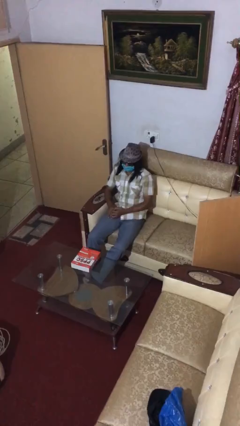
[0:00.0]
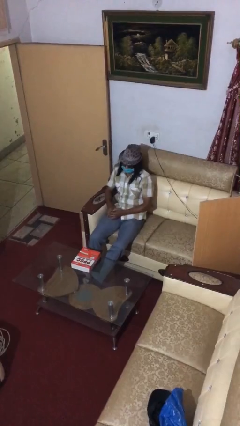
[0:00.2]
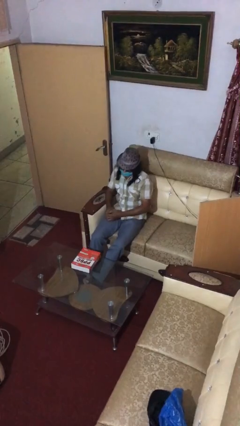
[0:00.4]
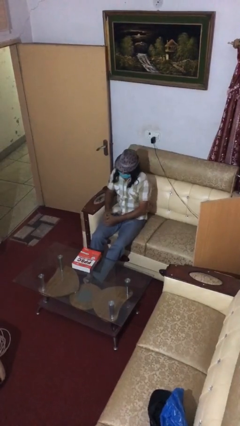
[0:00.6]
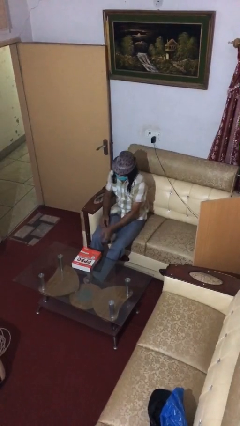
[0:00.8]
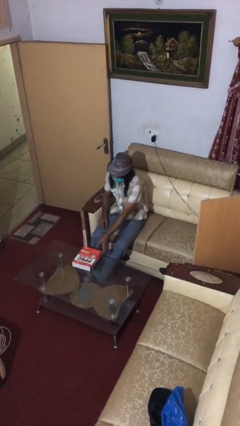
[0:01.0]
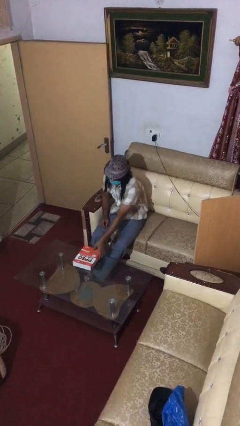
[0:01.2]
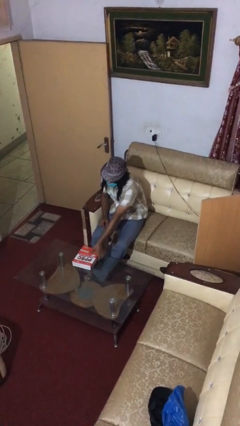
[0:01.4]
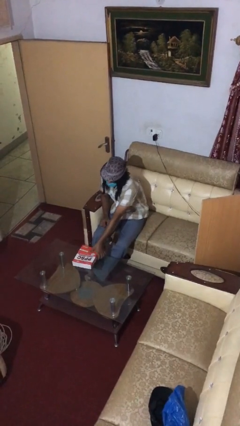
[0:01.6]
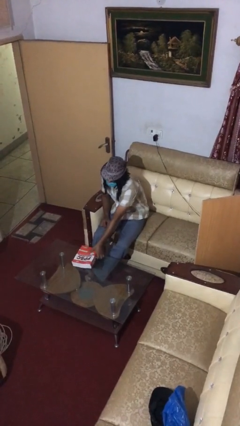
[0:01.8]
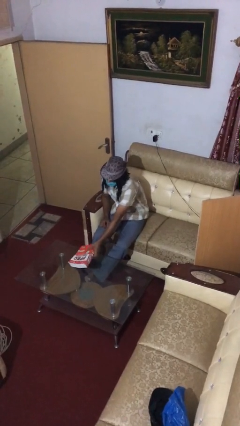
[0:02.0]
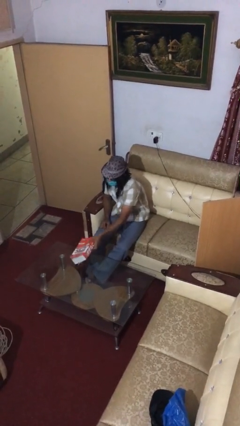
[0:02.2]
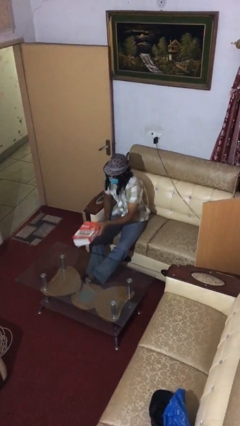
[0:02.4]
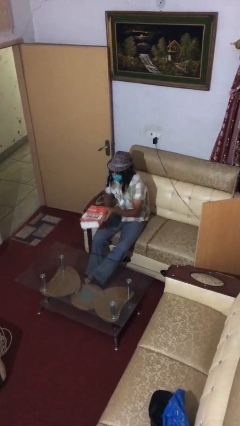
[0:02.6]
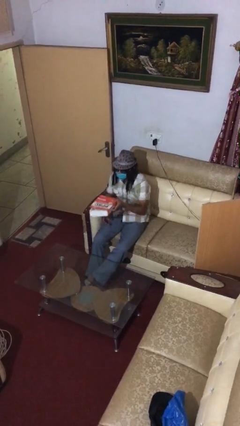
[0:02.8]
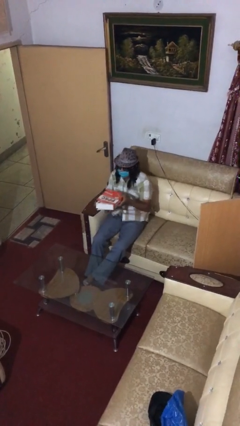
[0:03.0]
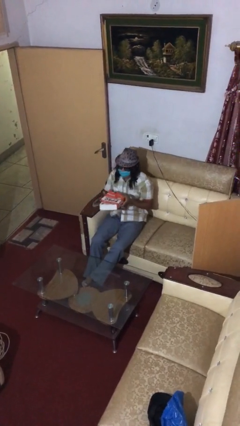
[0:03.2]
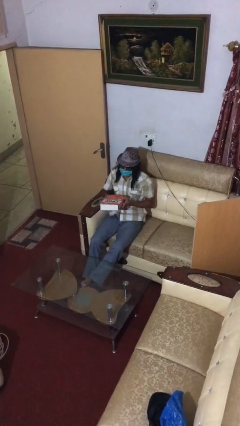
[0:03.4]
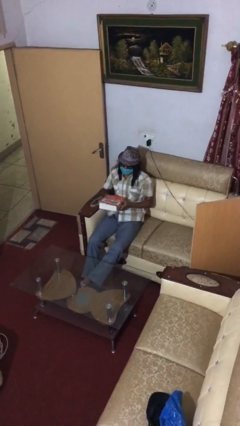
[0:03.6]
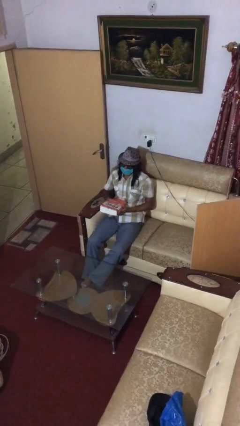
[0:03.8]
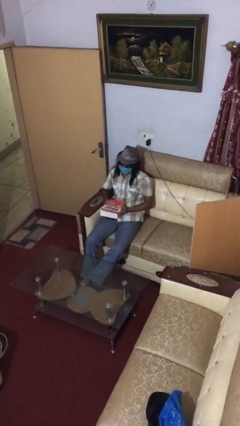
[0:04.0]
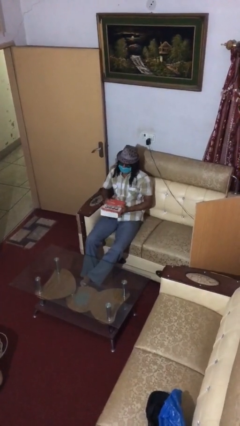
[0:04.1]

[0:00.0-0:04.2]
person picks up object from table

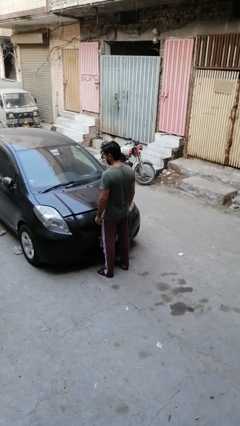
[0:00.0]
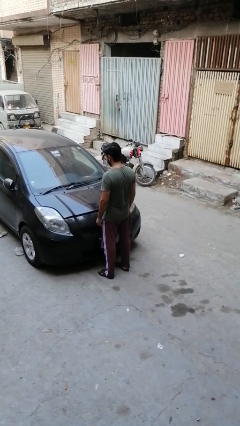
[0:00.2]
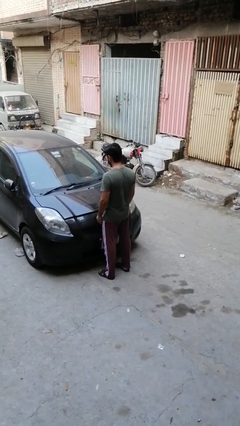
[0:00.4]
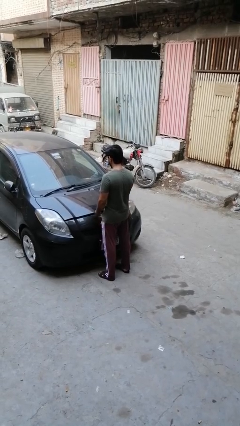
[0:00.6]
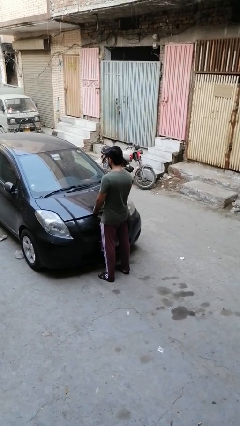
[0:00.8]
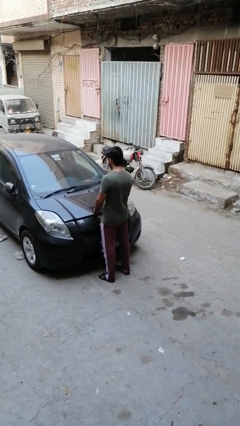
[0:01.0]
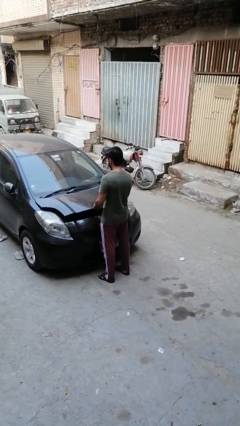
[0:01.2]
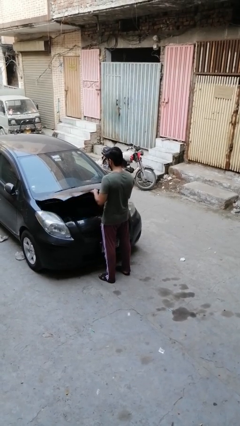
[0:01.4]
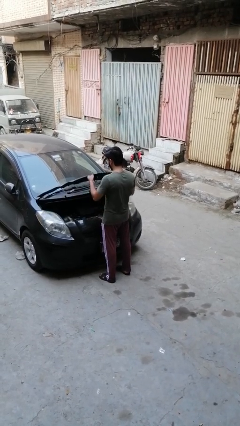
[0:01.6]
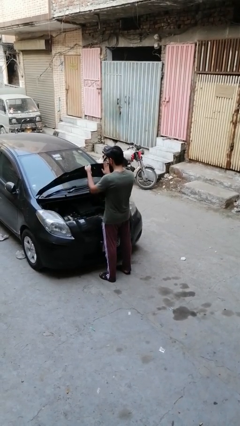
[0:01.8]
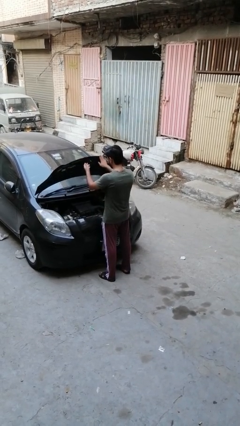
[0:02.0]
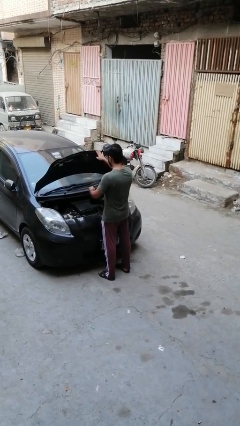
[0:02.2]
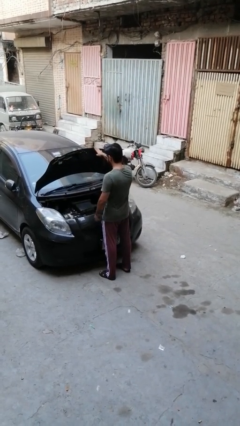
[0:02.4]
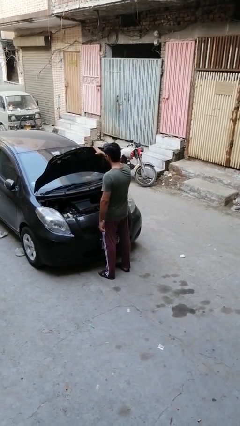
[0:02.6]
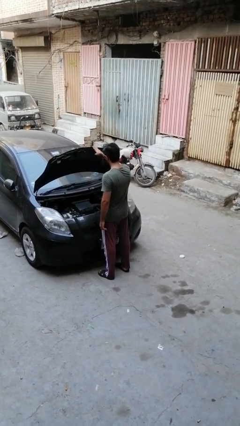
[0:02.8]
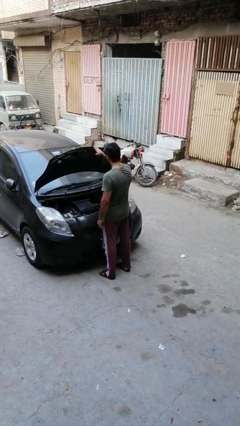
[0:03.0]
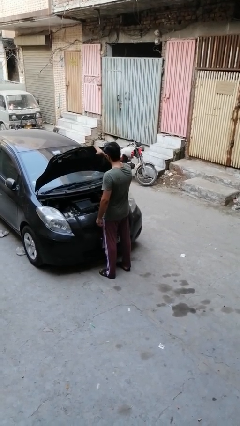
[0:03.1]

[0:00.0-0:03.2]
person opens car hood

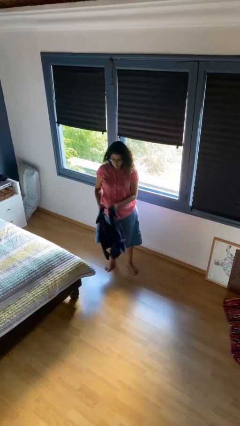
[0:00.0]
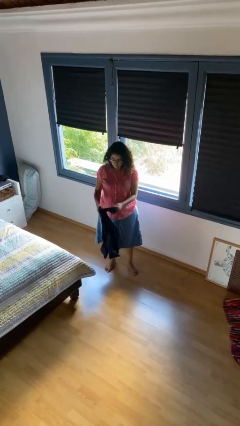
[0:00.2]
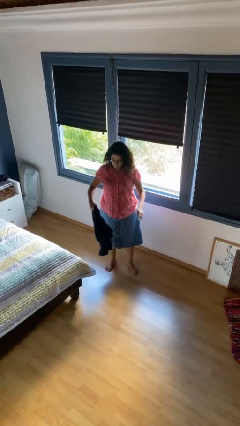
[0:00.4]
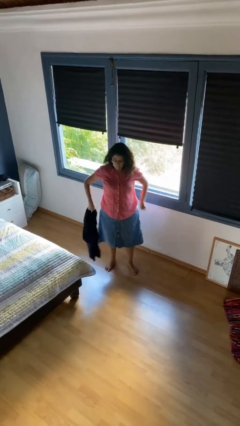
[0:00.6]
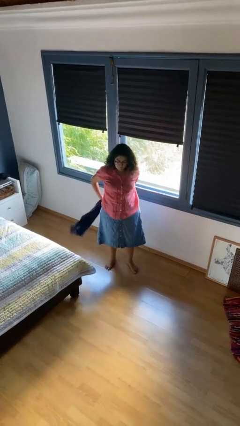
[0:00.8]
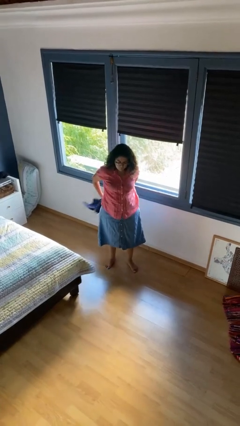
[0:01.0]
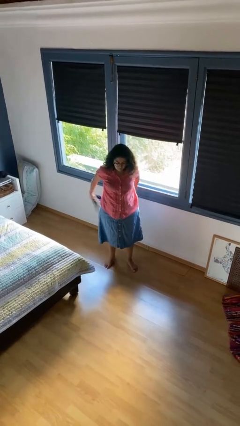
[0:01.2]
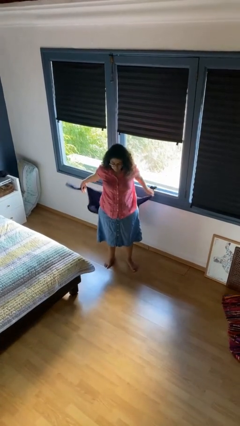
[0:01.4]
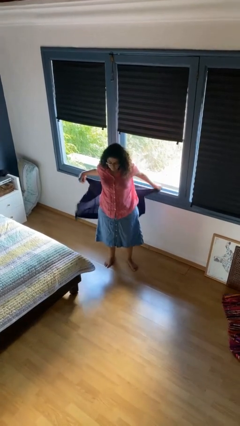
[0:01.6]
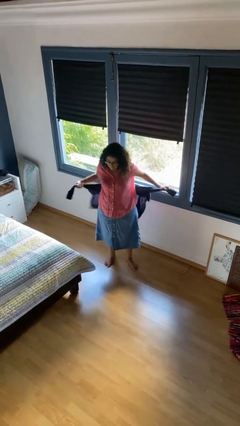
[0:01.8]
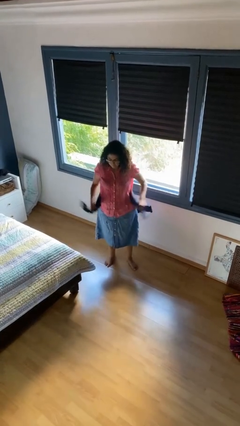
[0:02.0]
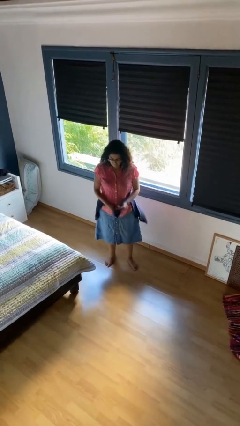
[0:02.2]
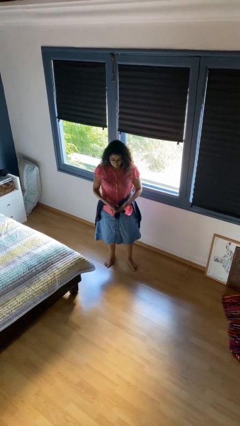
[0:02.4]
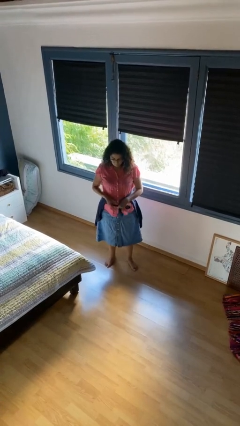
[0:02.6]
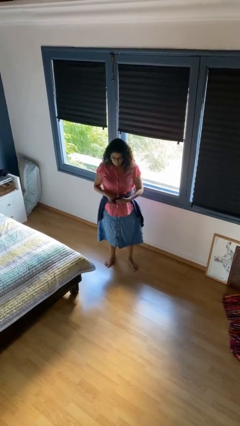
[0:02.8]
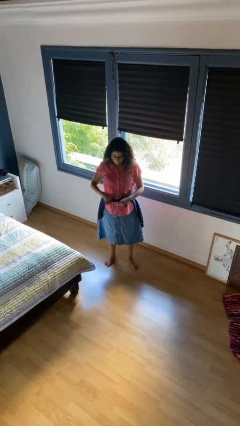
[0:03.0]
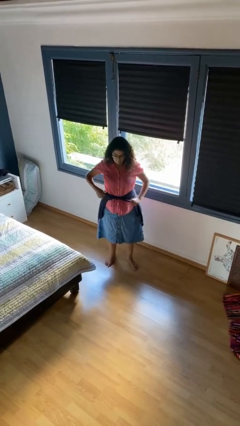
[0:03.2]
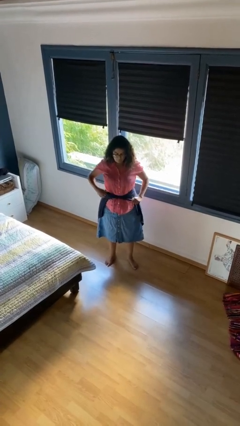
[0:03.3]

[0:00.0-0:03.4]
person ties jacket around waist

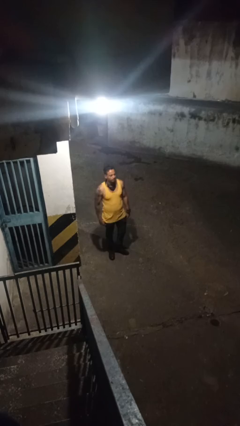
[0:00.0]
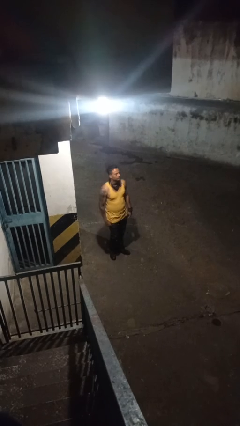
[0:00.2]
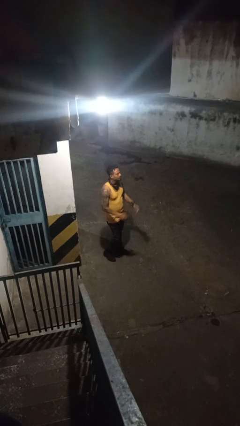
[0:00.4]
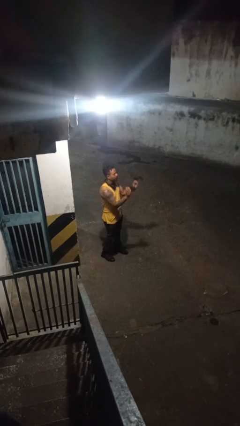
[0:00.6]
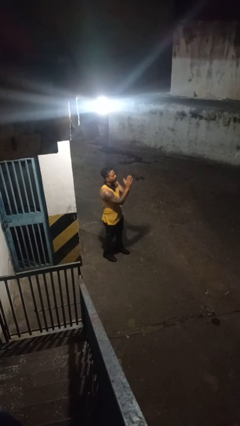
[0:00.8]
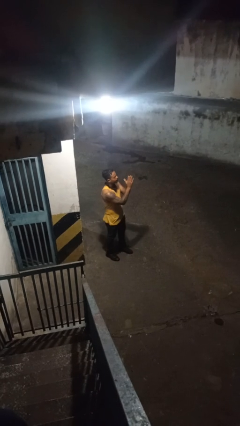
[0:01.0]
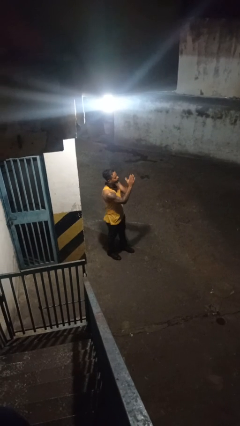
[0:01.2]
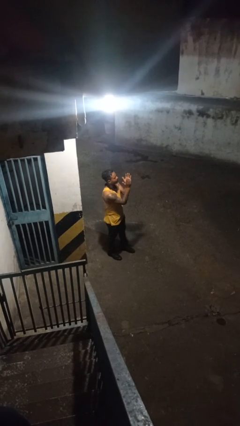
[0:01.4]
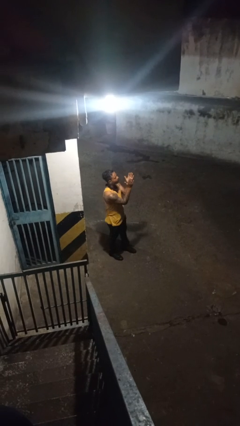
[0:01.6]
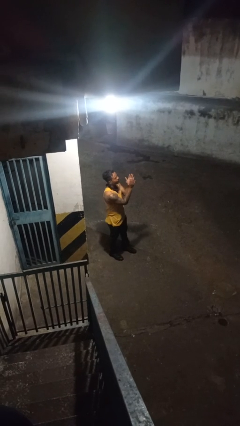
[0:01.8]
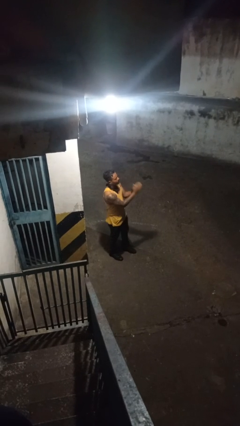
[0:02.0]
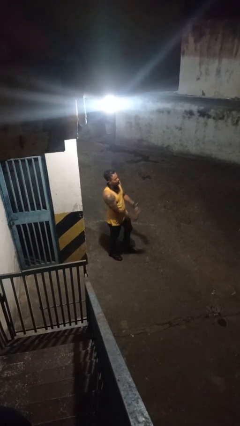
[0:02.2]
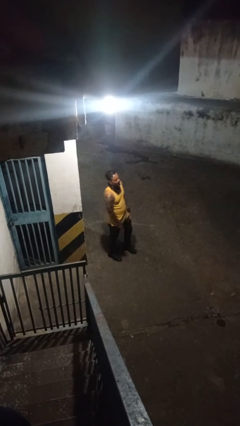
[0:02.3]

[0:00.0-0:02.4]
person claps hands

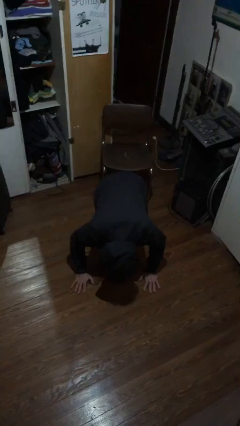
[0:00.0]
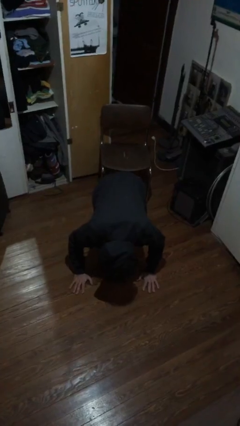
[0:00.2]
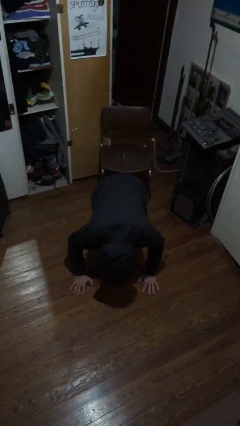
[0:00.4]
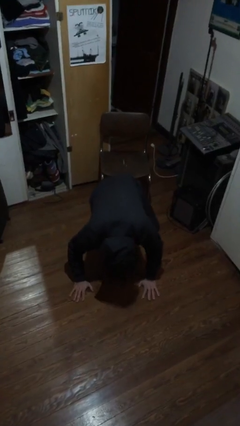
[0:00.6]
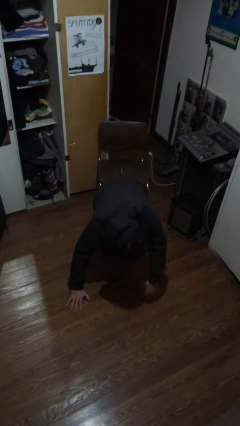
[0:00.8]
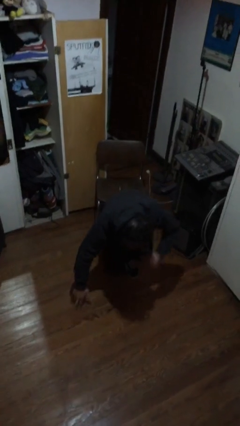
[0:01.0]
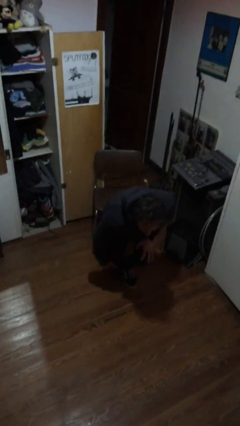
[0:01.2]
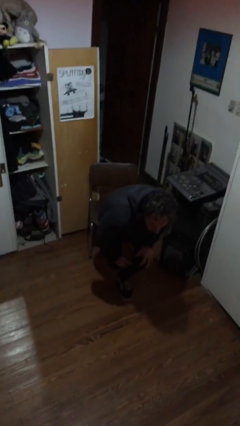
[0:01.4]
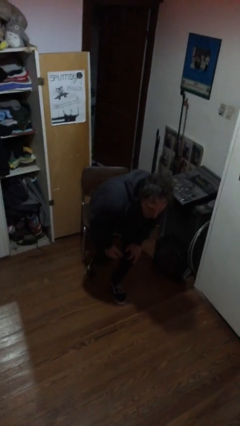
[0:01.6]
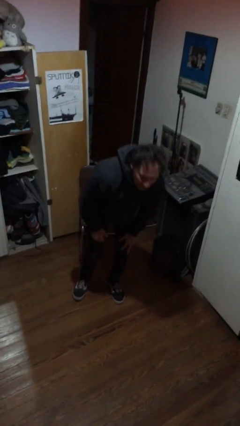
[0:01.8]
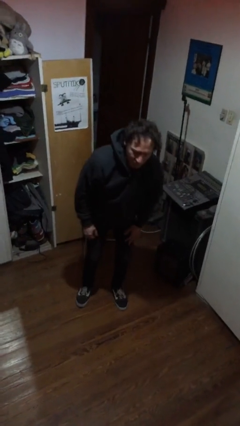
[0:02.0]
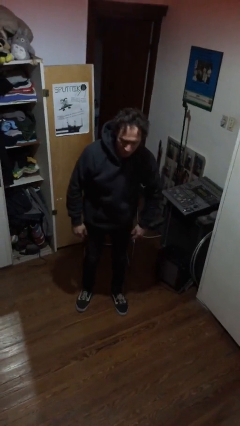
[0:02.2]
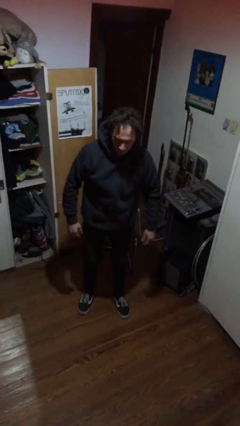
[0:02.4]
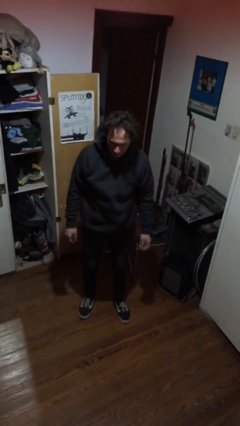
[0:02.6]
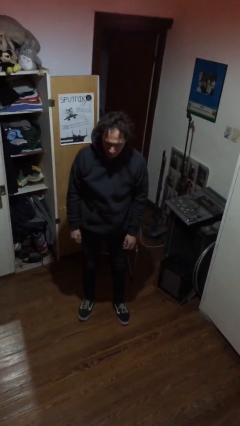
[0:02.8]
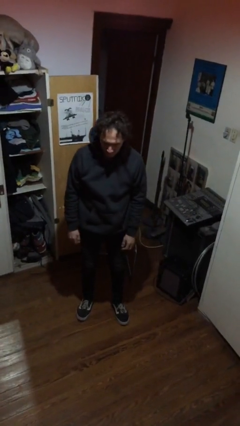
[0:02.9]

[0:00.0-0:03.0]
person stands up from floor

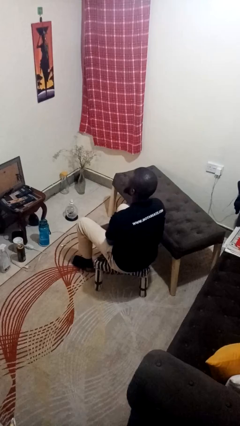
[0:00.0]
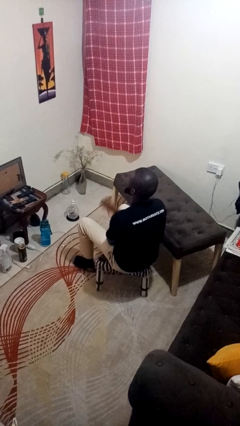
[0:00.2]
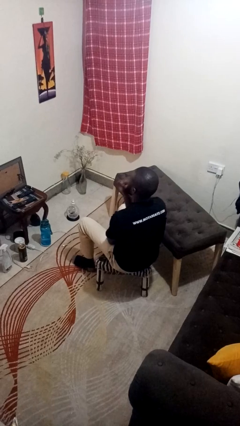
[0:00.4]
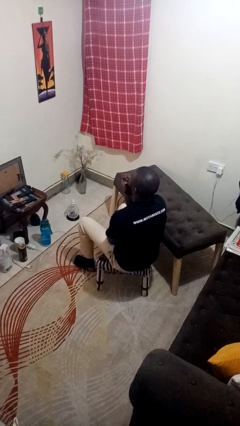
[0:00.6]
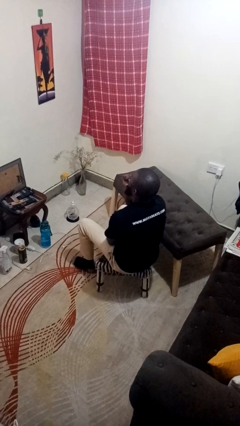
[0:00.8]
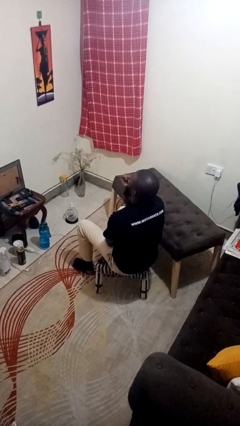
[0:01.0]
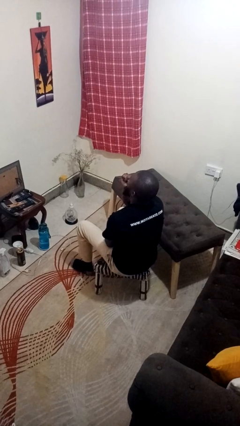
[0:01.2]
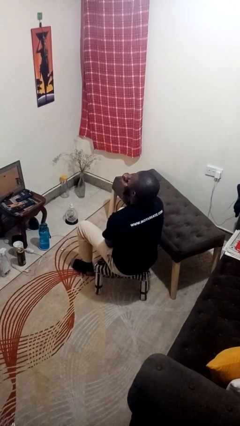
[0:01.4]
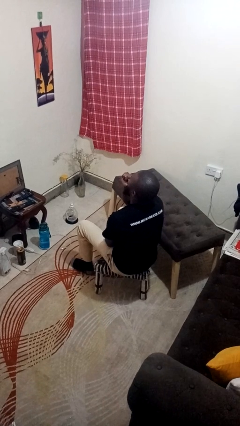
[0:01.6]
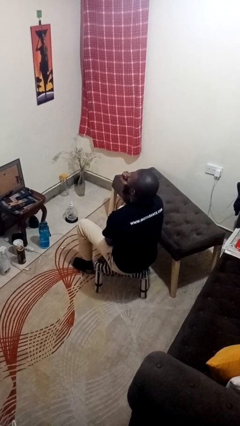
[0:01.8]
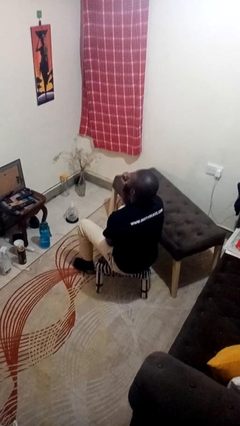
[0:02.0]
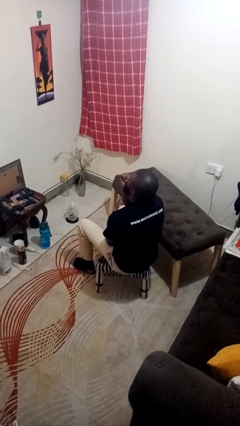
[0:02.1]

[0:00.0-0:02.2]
person yawns
